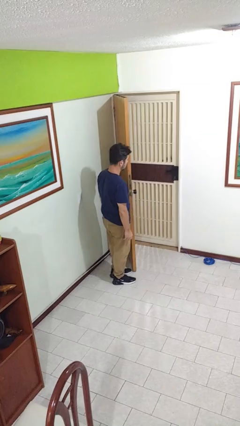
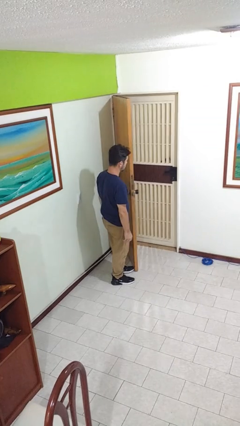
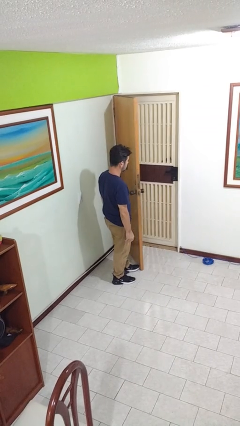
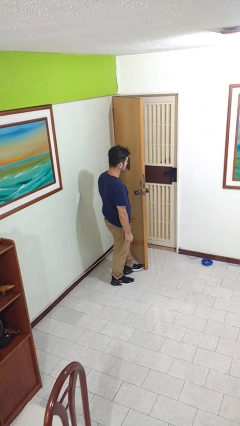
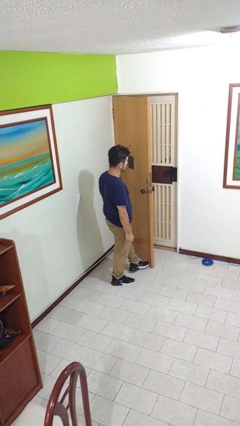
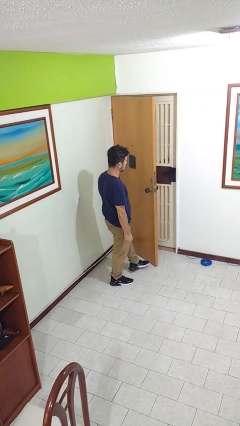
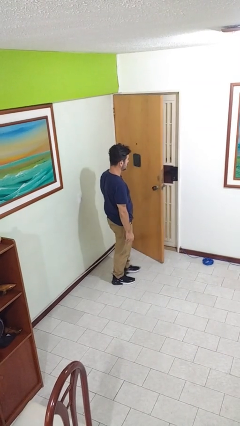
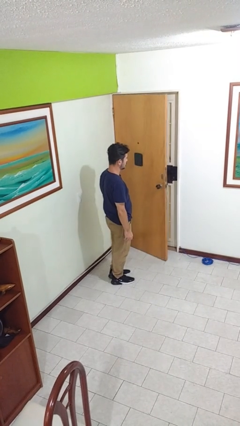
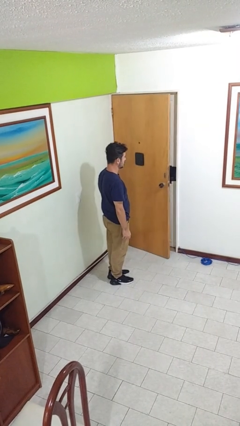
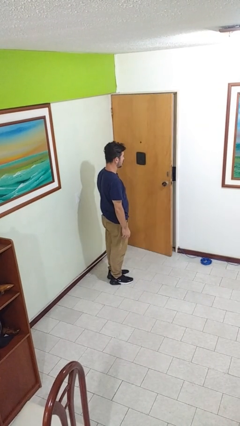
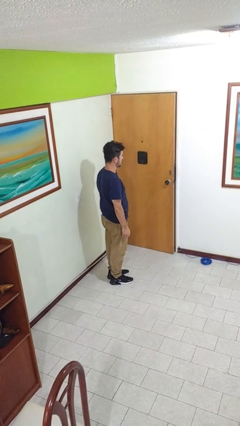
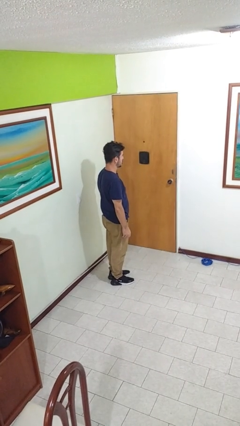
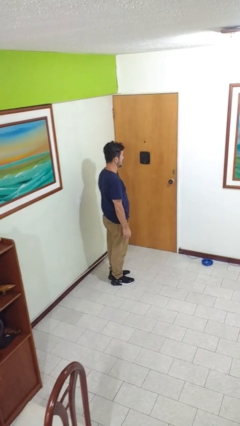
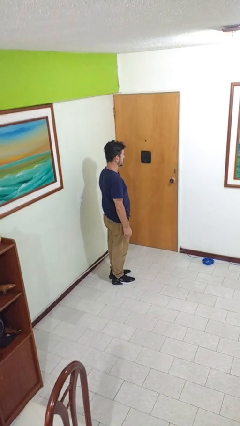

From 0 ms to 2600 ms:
person closes door with foot

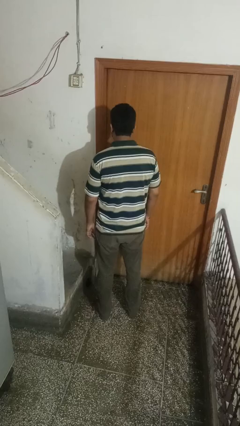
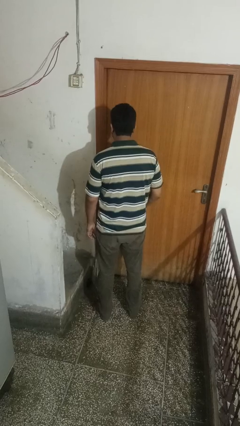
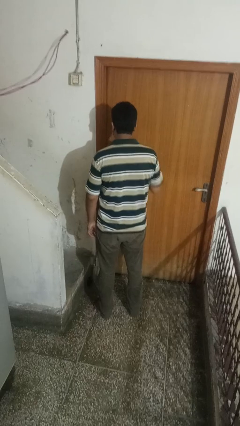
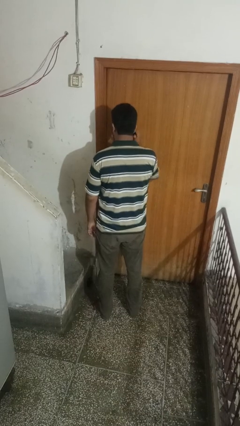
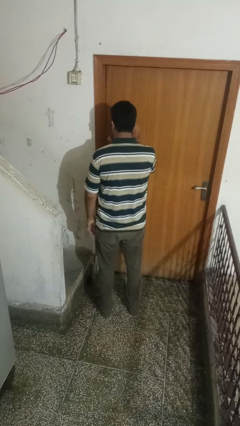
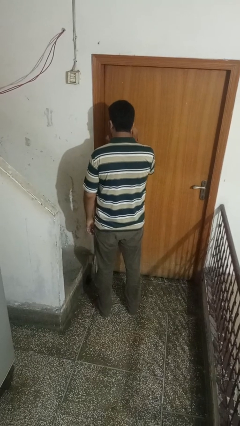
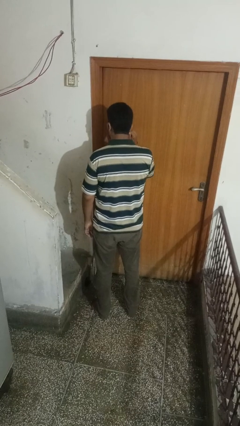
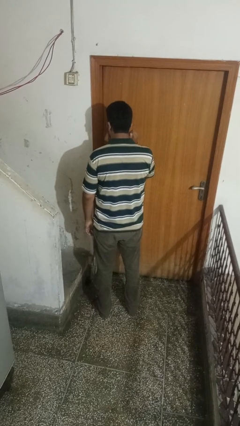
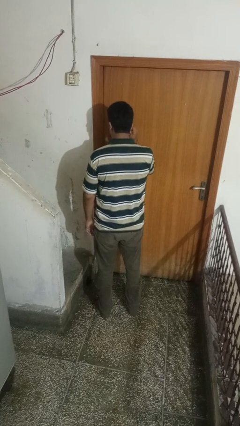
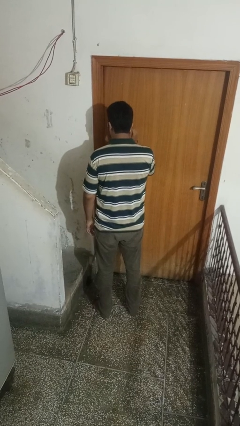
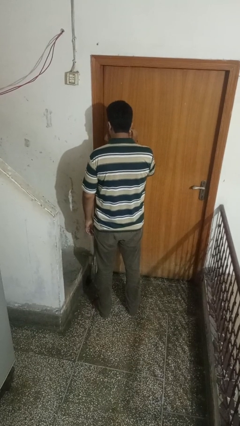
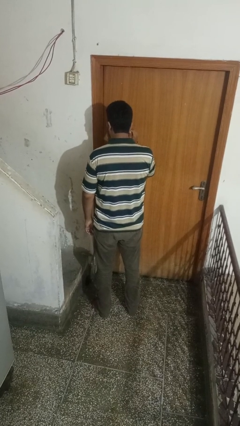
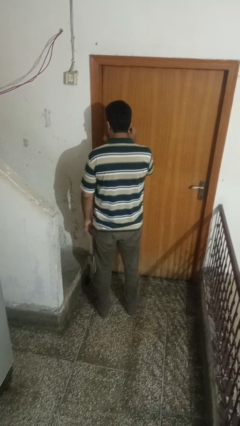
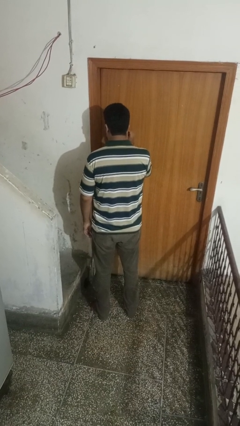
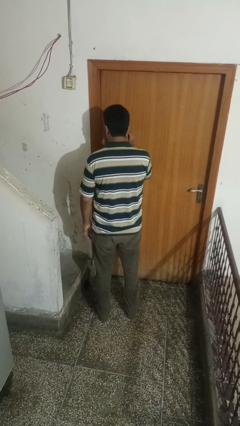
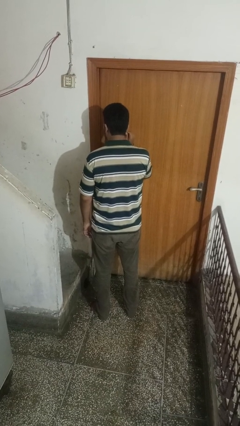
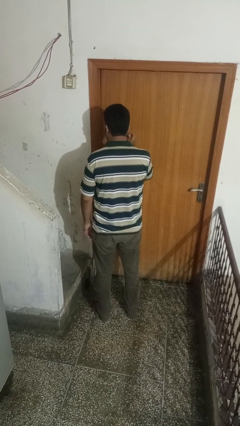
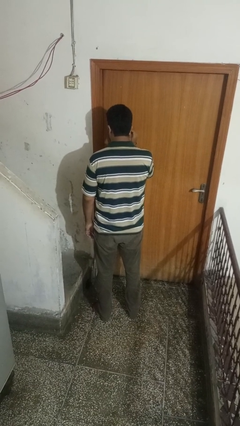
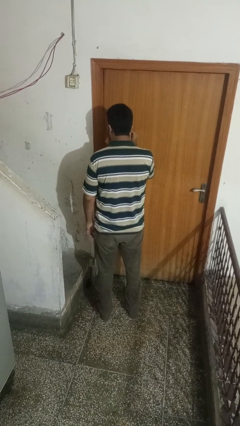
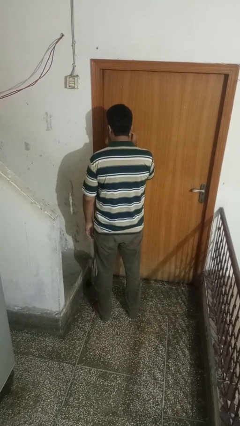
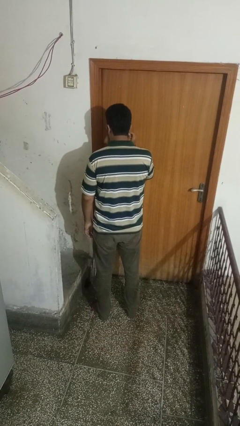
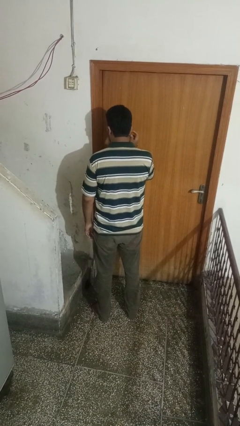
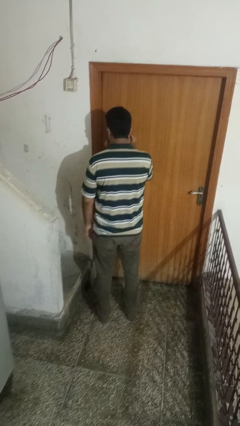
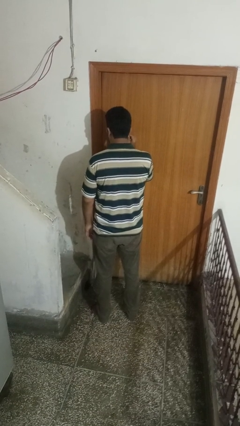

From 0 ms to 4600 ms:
person touches earlobe

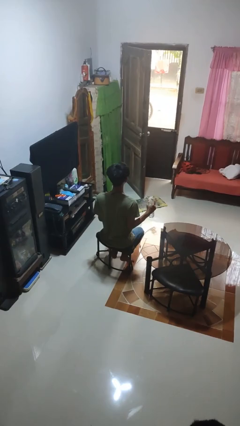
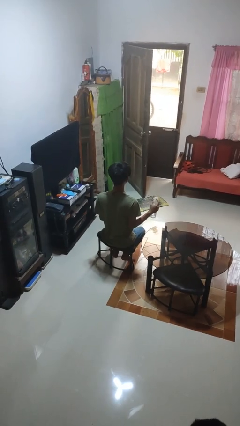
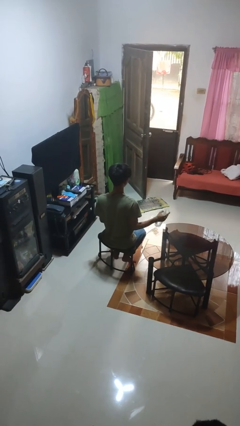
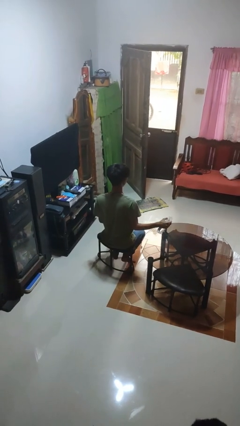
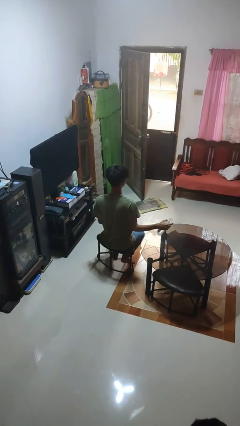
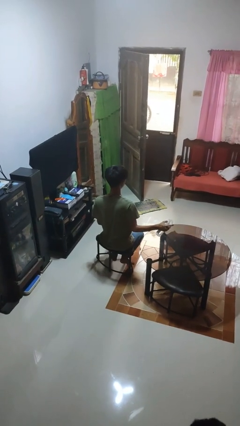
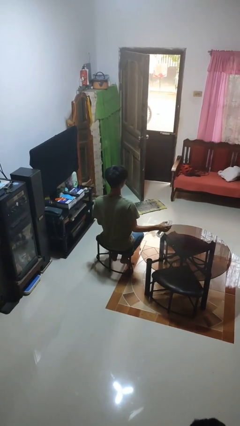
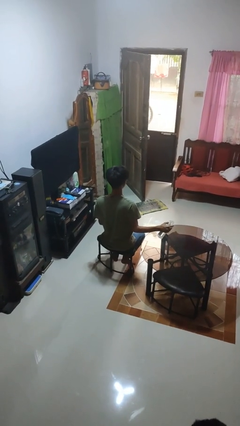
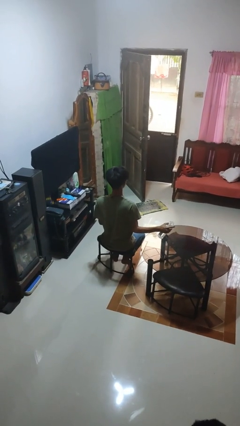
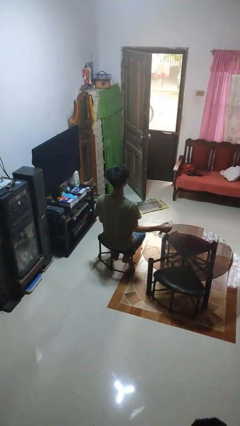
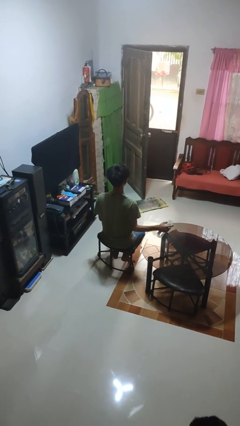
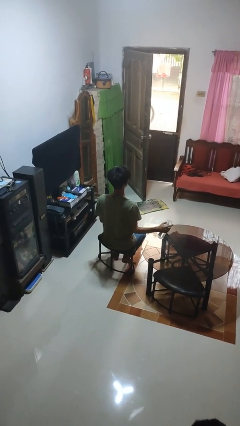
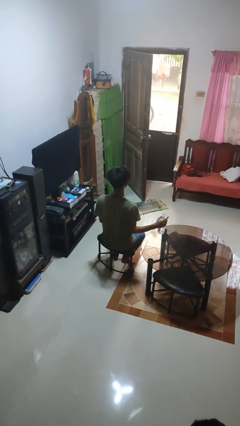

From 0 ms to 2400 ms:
person sprays from bottle

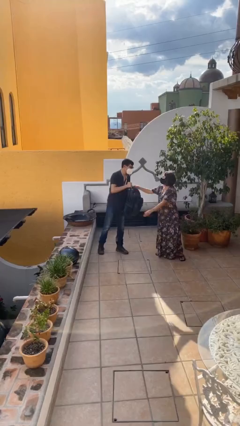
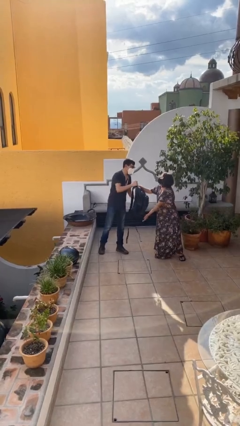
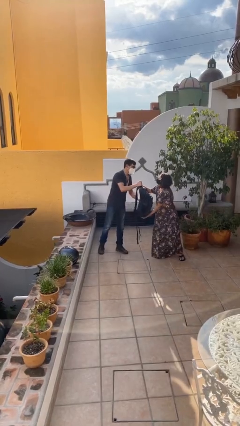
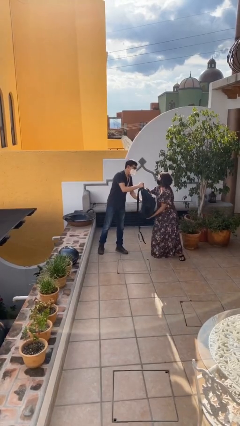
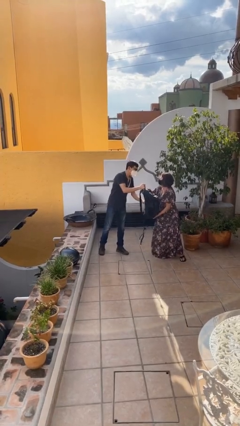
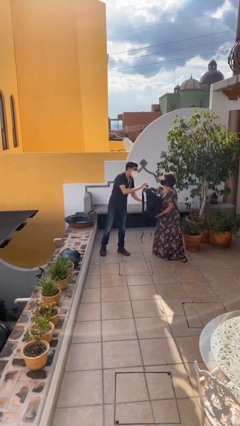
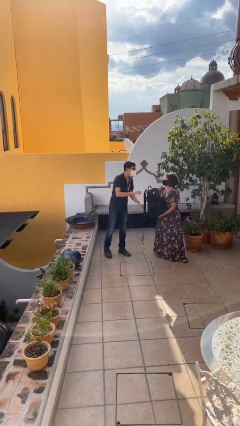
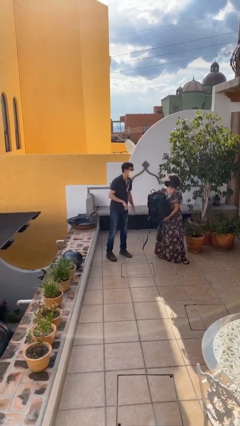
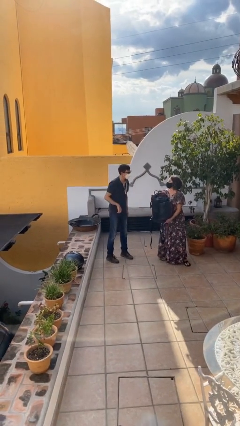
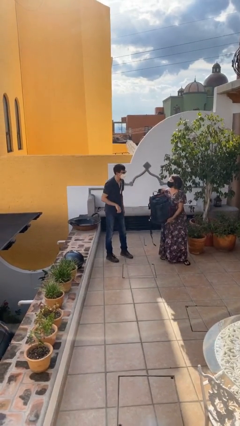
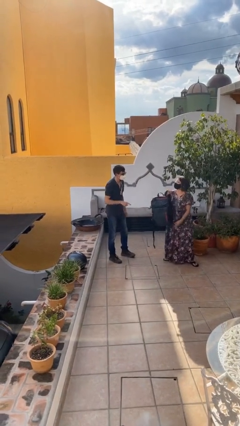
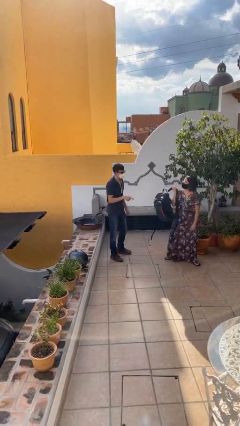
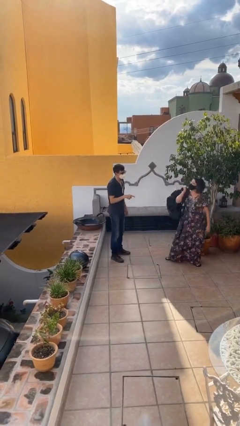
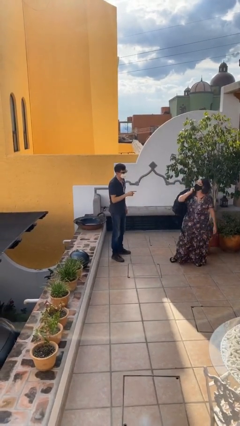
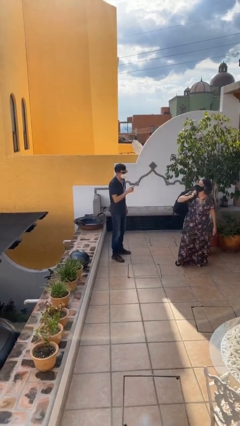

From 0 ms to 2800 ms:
person transfers object to person

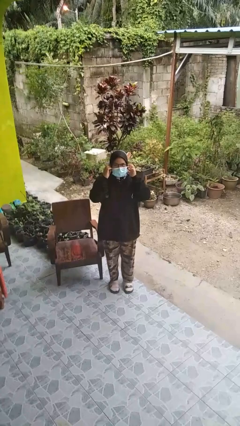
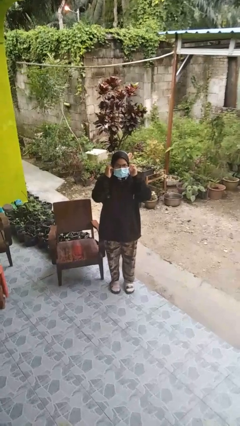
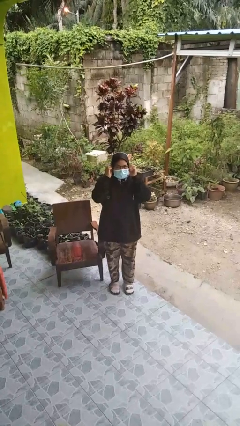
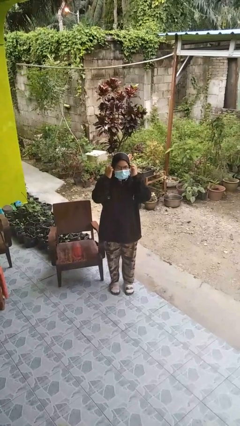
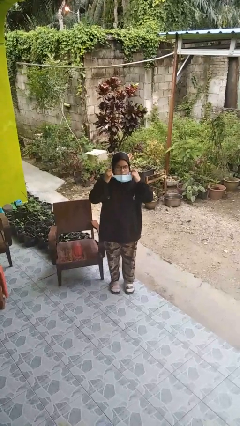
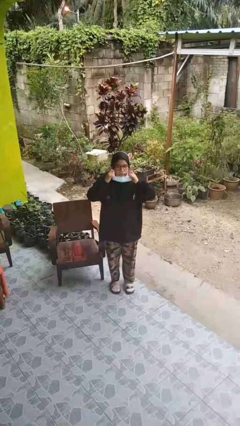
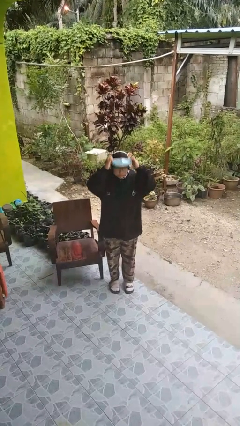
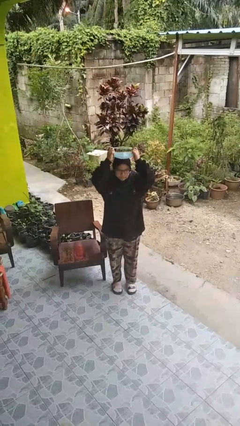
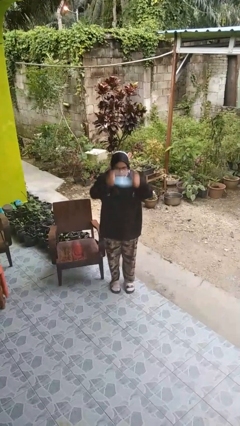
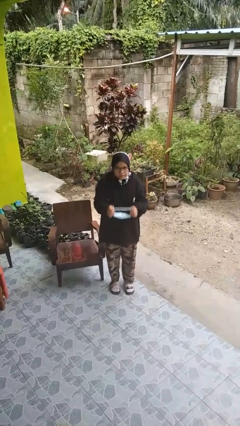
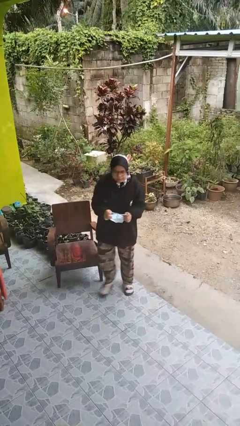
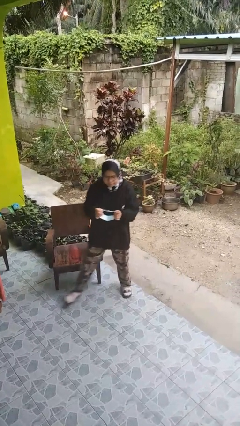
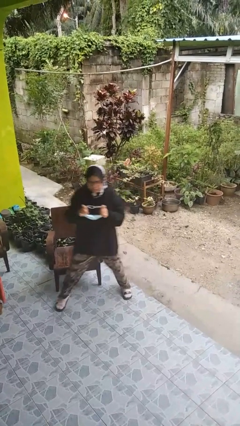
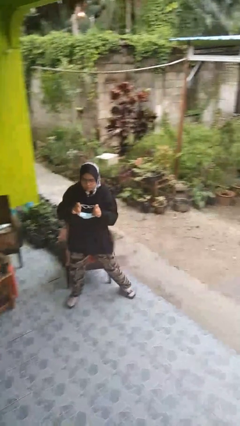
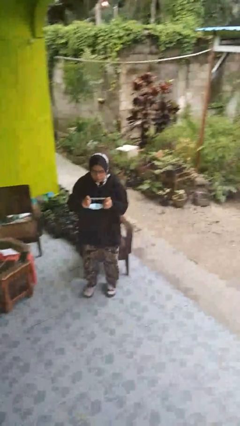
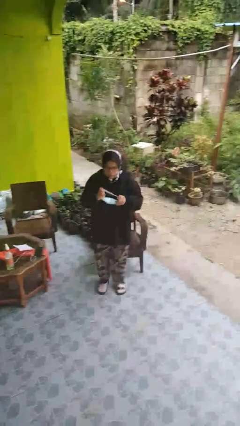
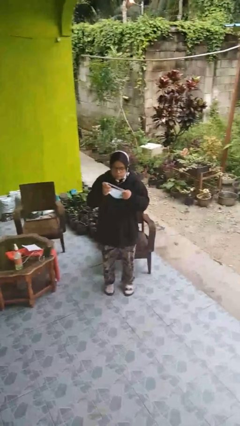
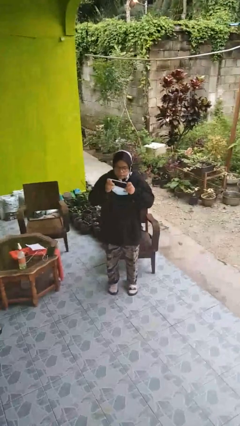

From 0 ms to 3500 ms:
person takes off facemask

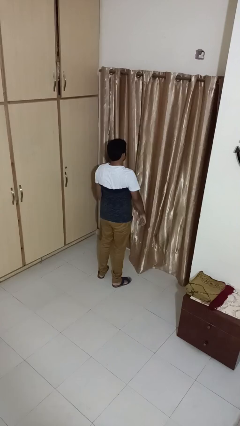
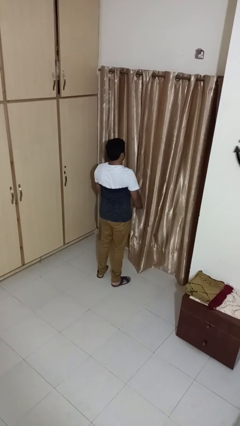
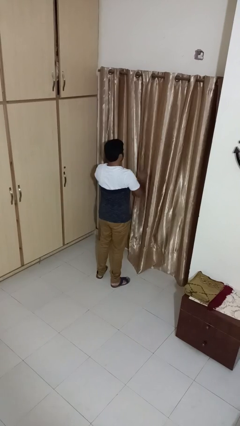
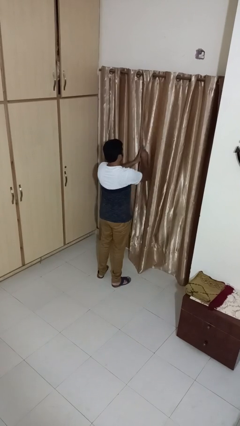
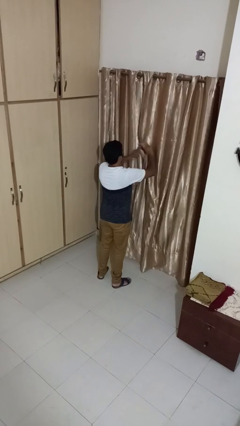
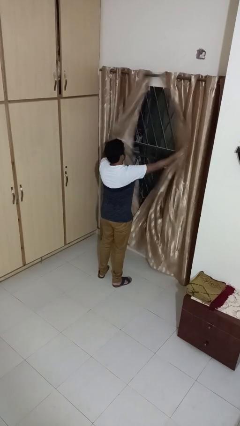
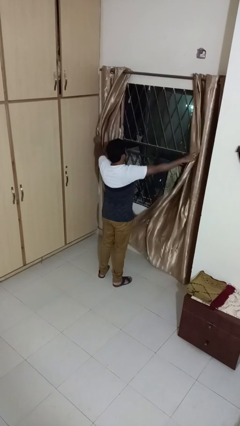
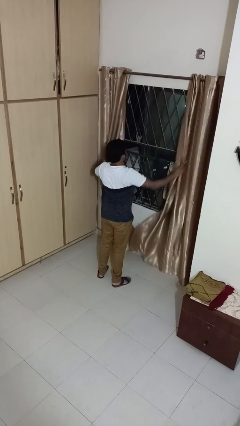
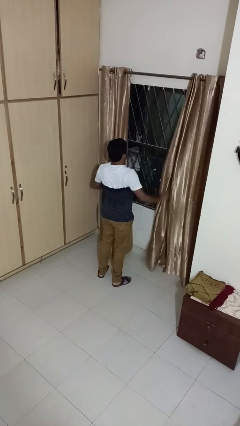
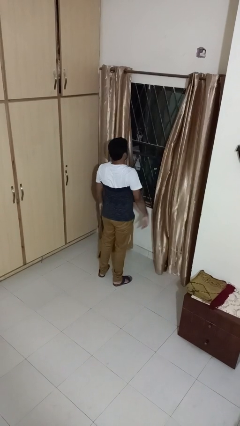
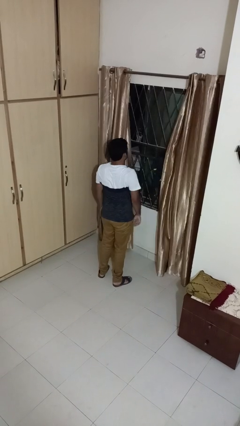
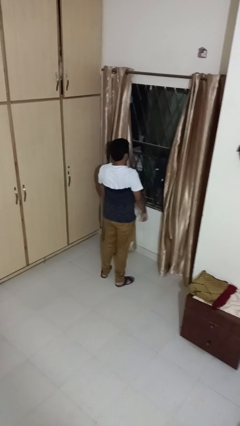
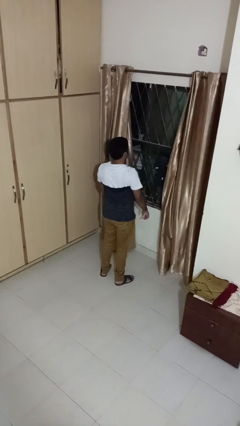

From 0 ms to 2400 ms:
person opens curtains
